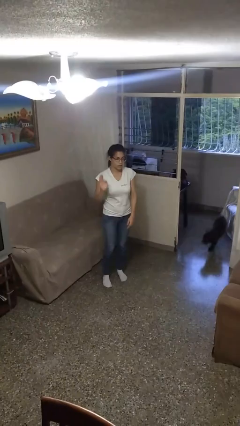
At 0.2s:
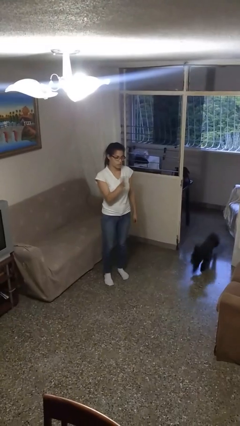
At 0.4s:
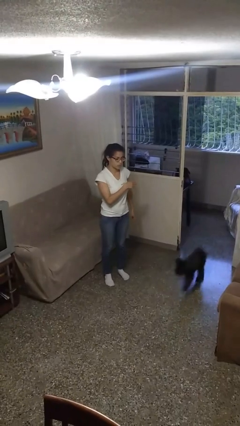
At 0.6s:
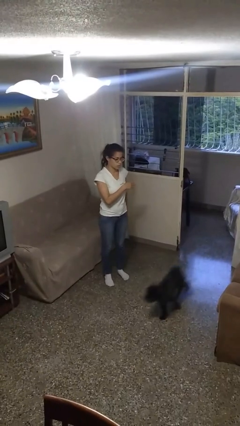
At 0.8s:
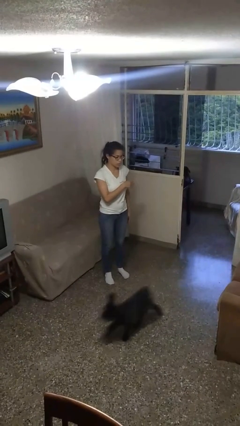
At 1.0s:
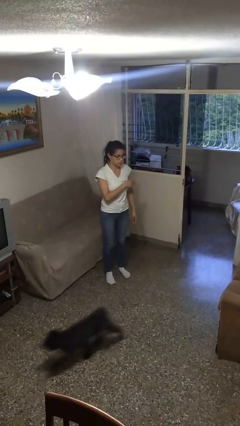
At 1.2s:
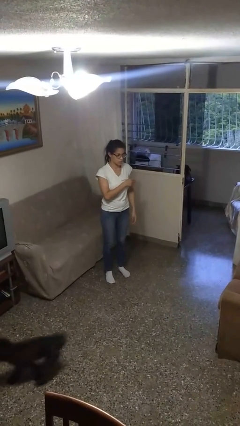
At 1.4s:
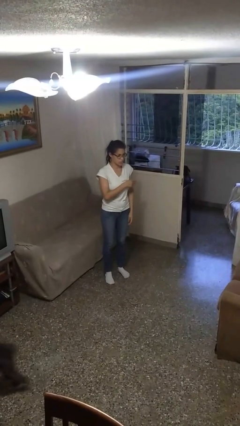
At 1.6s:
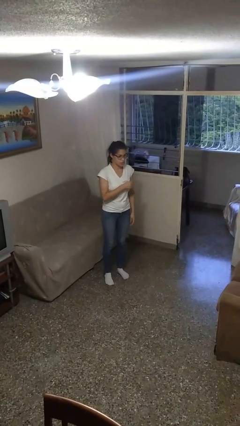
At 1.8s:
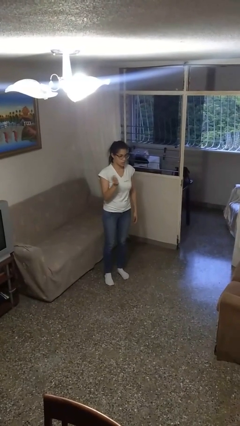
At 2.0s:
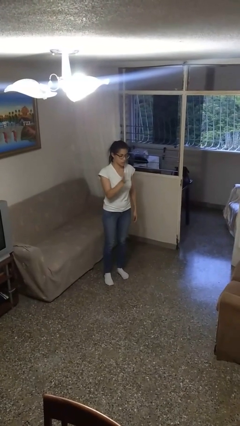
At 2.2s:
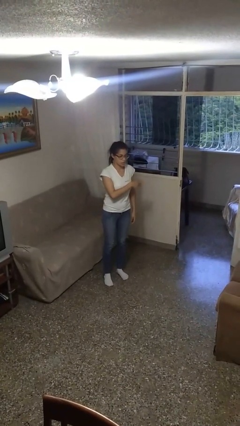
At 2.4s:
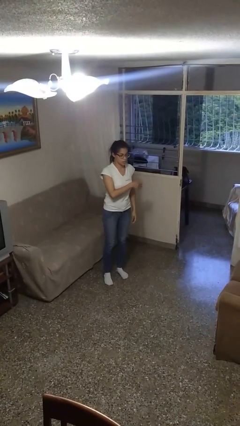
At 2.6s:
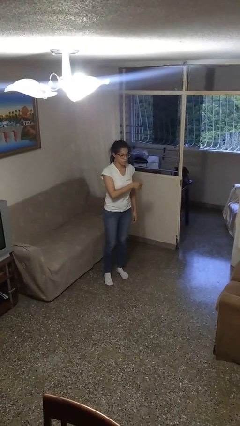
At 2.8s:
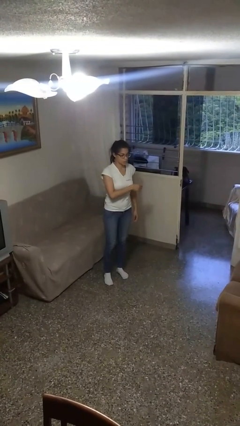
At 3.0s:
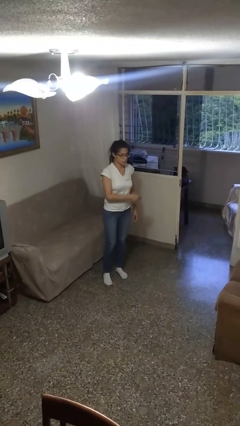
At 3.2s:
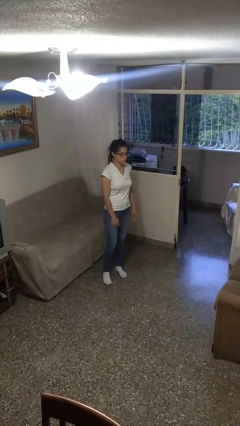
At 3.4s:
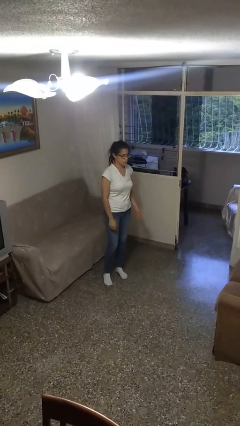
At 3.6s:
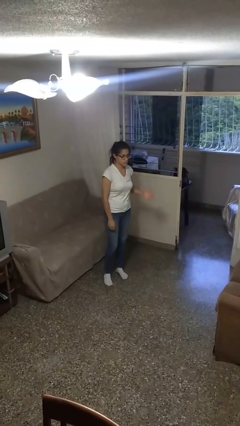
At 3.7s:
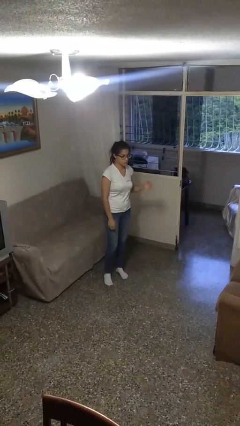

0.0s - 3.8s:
person gestures swipe left

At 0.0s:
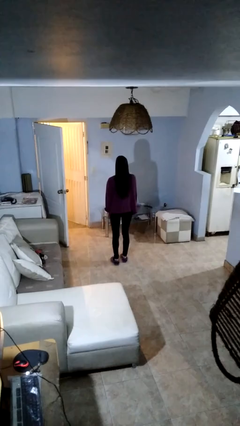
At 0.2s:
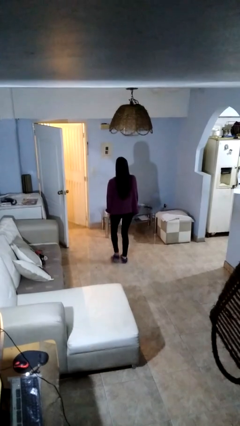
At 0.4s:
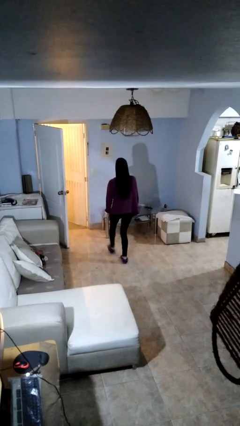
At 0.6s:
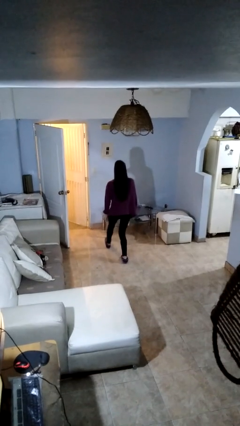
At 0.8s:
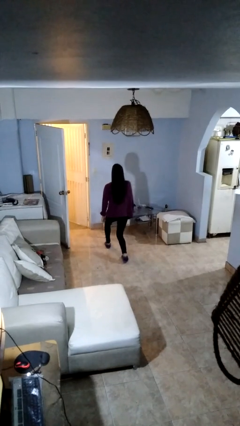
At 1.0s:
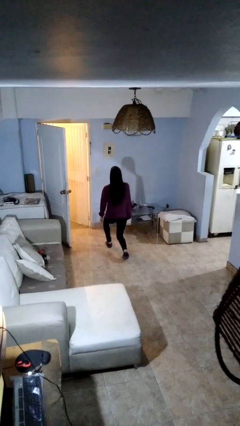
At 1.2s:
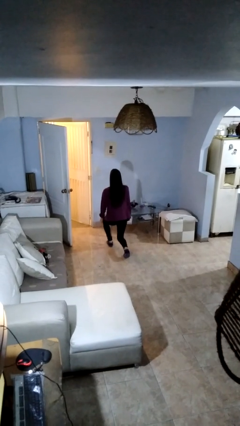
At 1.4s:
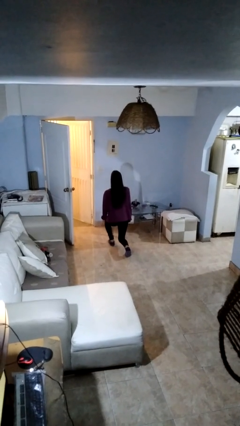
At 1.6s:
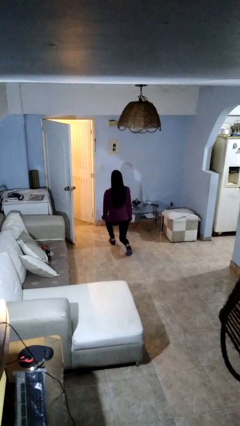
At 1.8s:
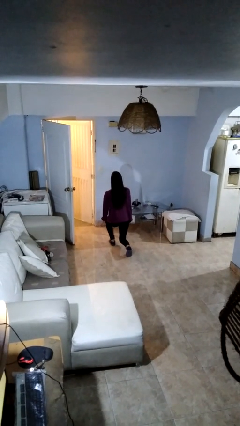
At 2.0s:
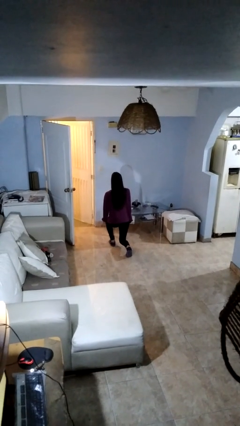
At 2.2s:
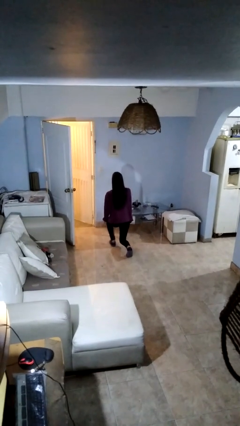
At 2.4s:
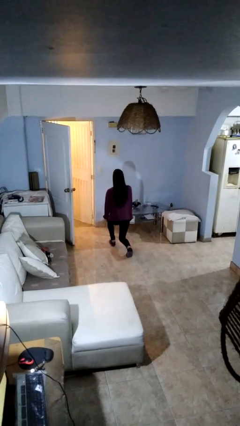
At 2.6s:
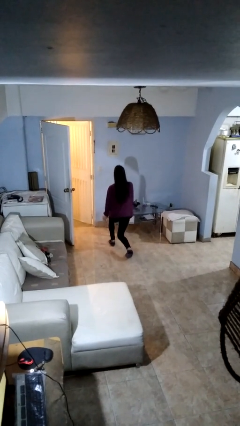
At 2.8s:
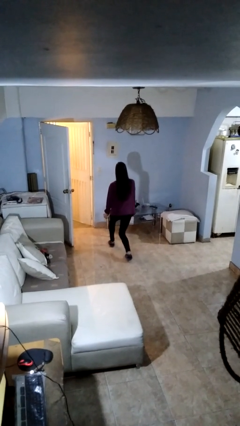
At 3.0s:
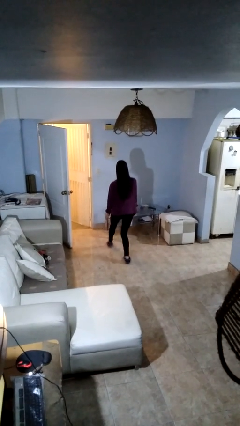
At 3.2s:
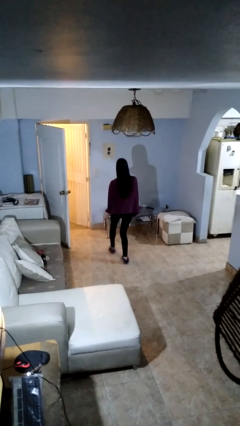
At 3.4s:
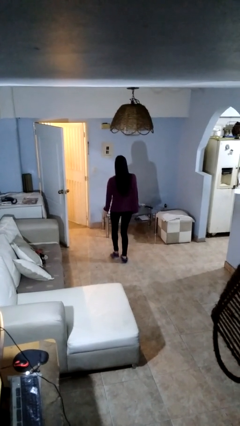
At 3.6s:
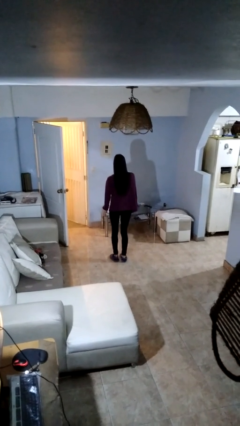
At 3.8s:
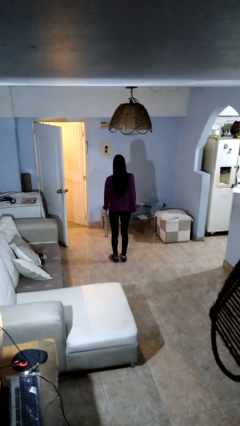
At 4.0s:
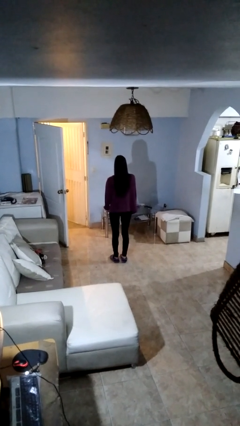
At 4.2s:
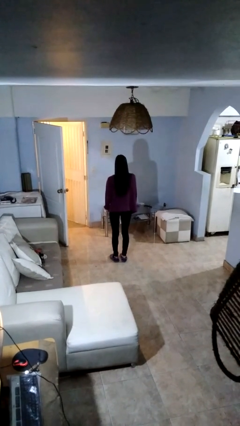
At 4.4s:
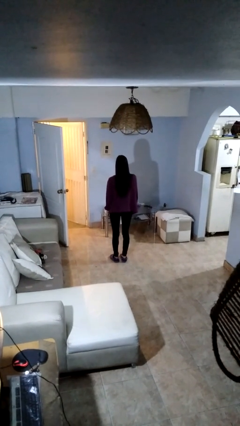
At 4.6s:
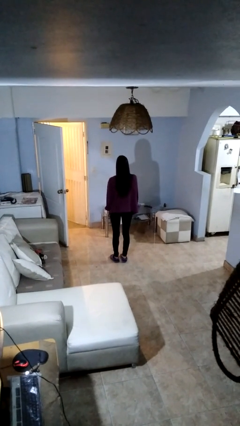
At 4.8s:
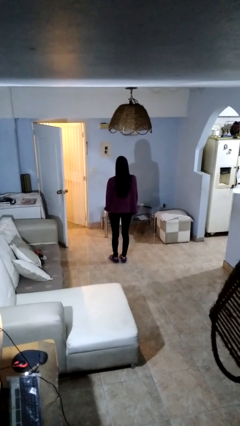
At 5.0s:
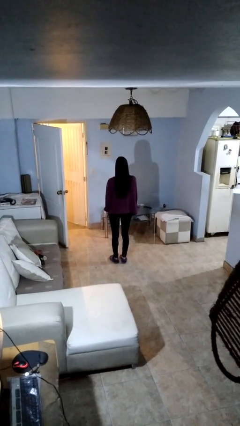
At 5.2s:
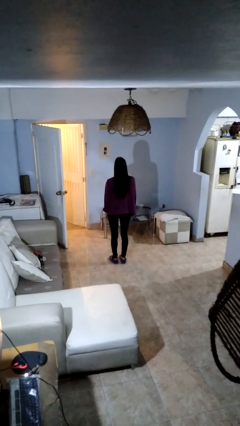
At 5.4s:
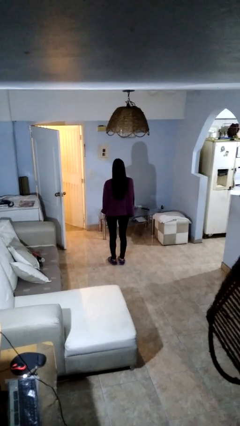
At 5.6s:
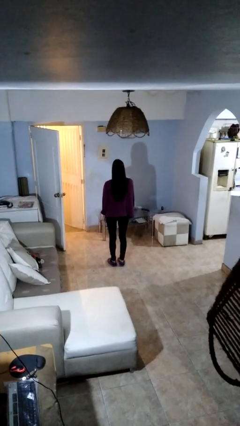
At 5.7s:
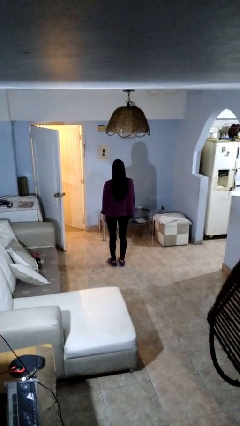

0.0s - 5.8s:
person exercises with lunges

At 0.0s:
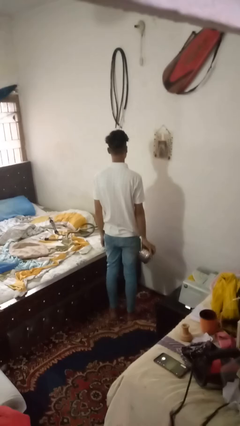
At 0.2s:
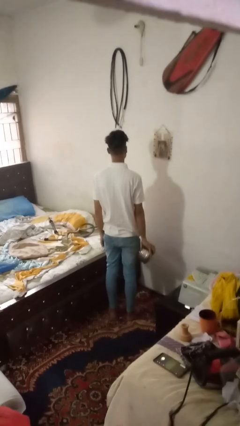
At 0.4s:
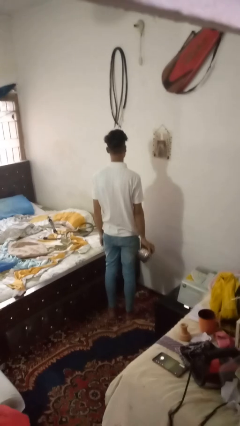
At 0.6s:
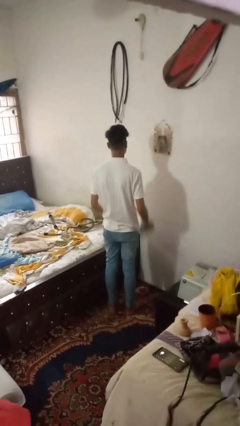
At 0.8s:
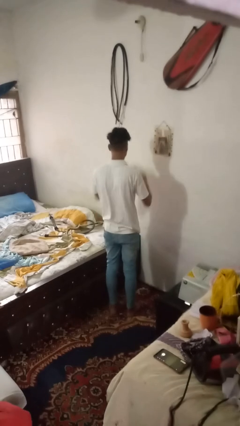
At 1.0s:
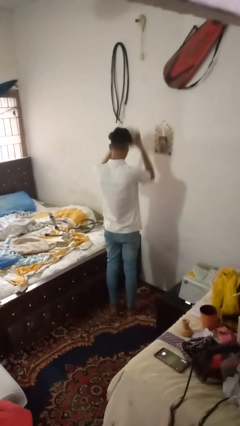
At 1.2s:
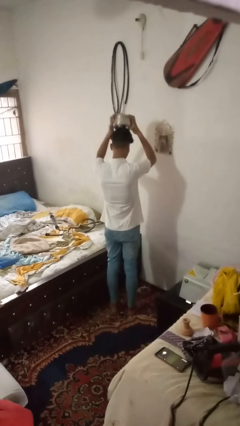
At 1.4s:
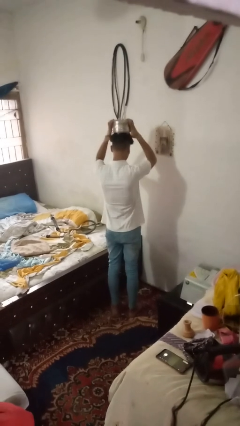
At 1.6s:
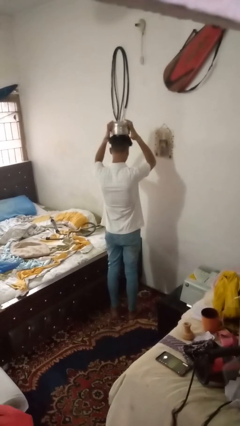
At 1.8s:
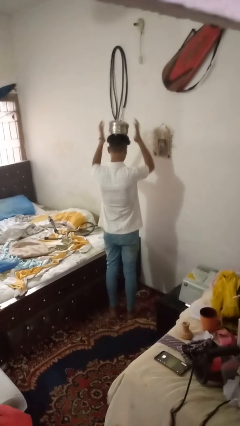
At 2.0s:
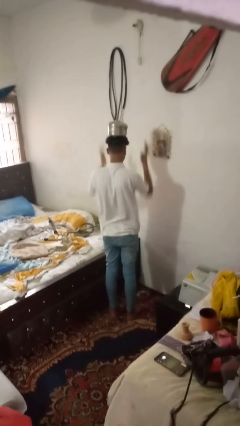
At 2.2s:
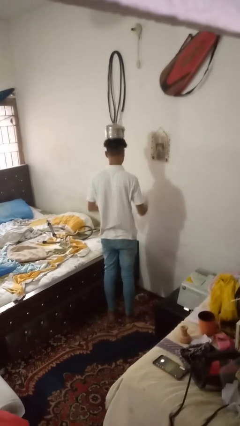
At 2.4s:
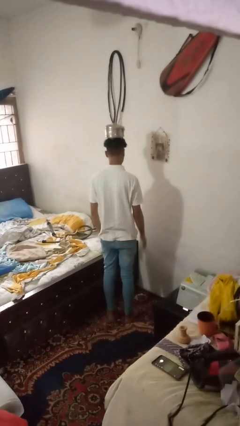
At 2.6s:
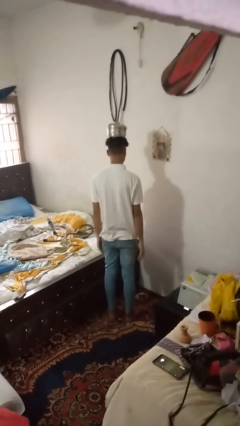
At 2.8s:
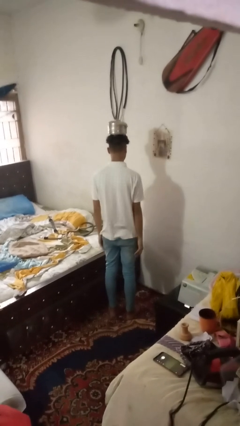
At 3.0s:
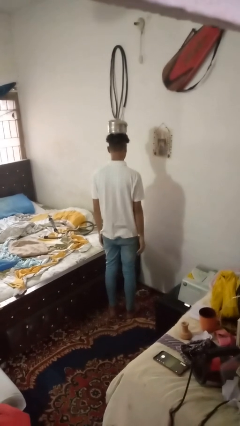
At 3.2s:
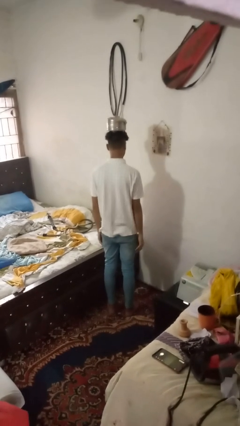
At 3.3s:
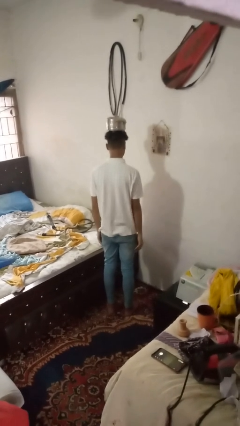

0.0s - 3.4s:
person holds object above head

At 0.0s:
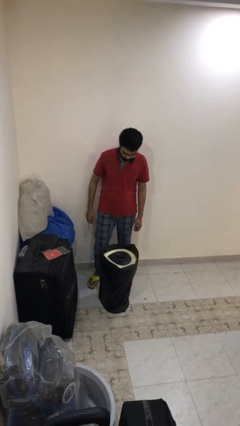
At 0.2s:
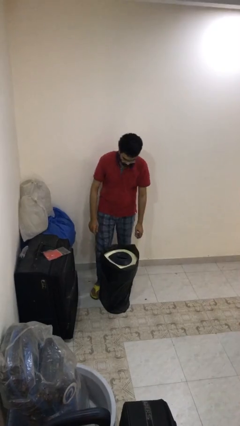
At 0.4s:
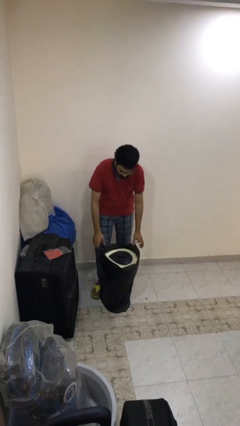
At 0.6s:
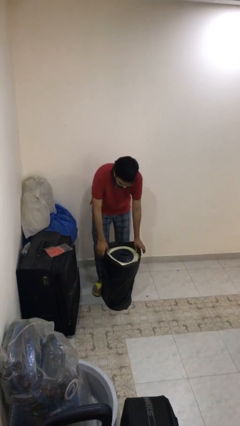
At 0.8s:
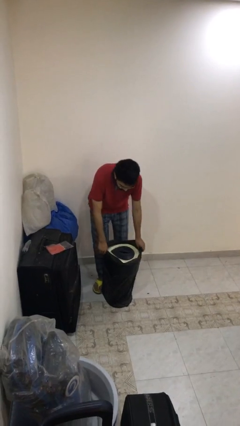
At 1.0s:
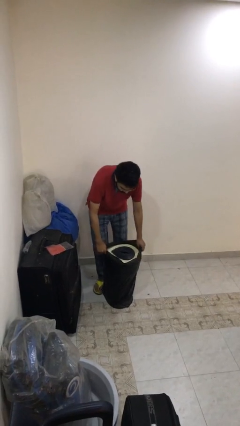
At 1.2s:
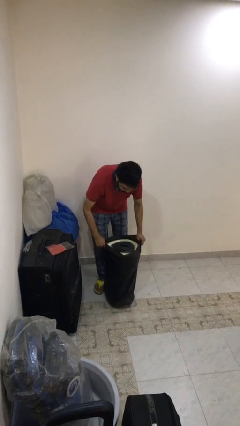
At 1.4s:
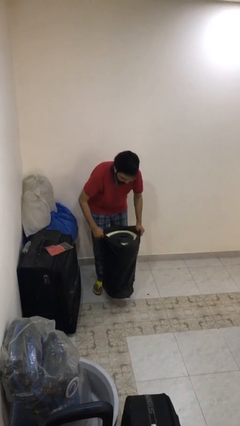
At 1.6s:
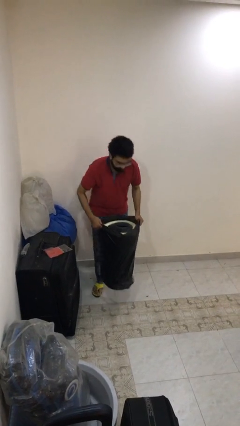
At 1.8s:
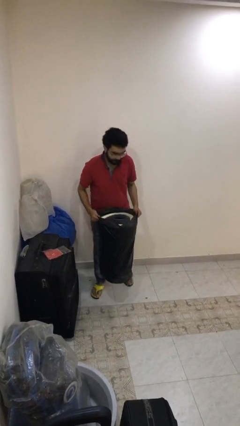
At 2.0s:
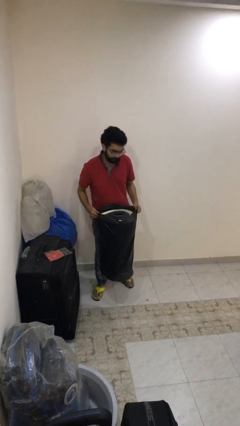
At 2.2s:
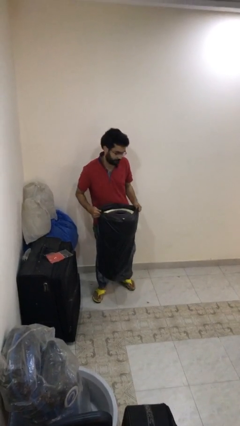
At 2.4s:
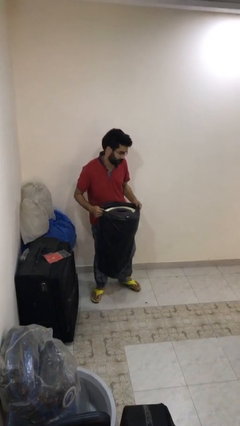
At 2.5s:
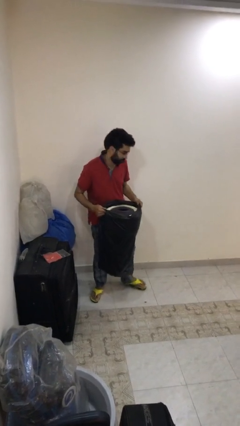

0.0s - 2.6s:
person picks up object from floor

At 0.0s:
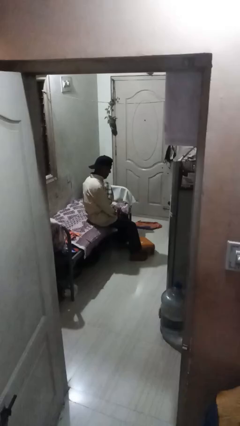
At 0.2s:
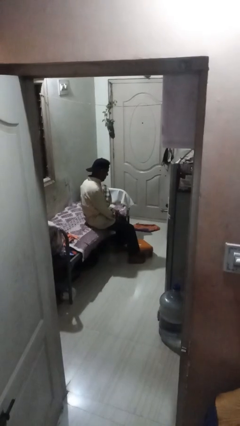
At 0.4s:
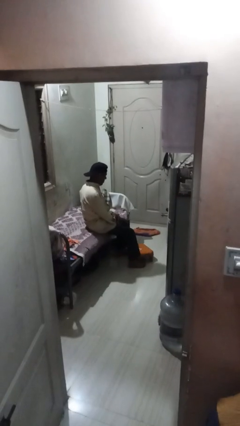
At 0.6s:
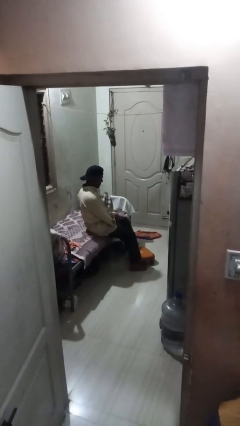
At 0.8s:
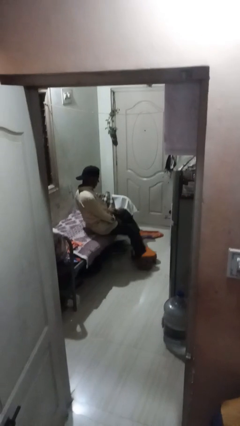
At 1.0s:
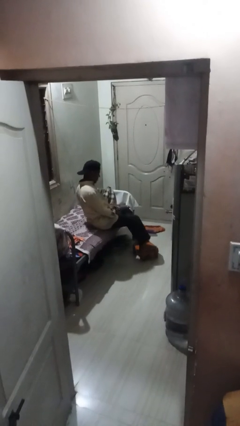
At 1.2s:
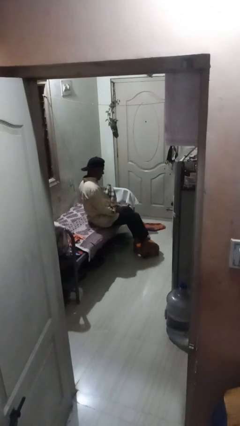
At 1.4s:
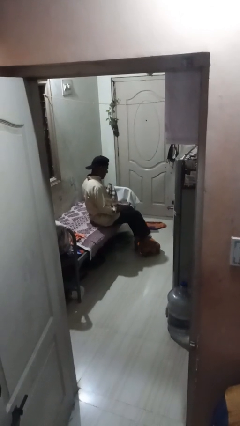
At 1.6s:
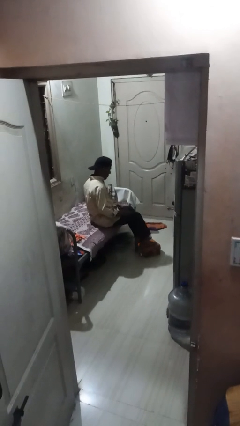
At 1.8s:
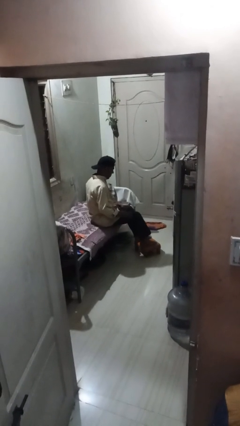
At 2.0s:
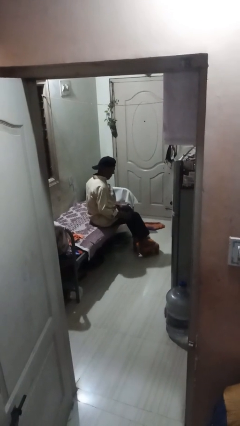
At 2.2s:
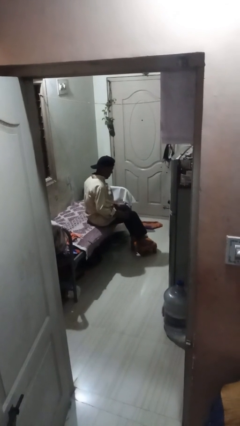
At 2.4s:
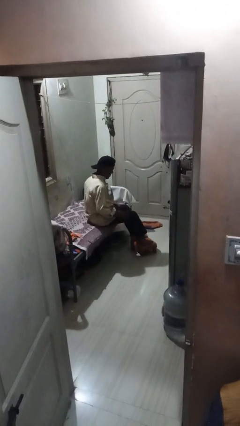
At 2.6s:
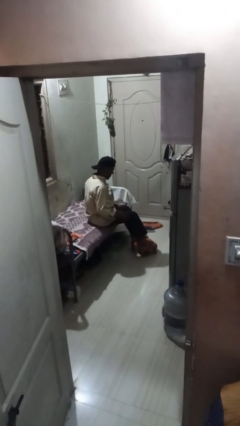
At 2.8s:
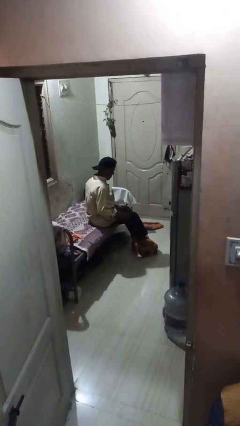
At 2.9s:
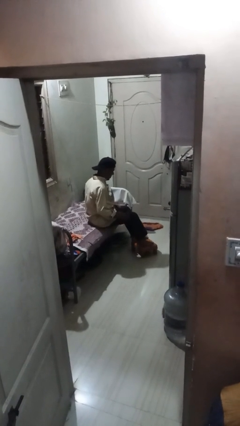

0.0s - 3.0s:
person puts feet up
